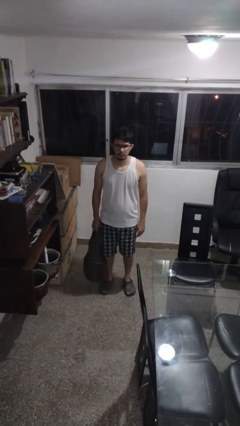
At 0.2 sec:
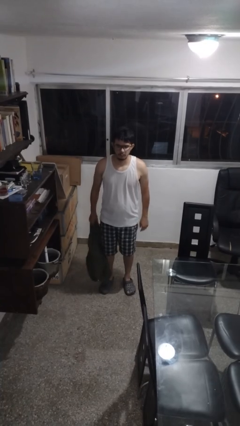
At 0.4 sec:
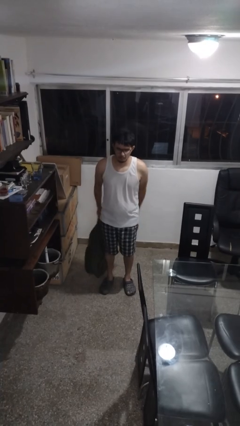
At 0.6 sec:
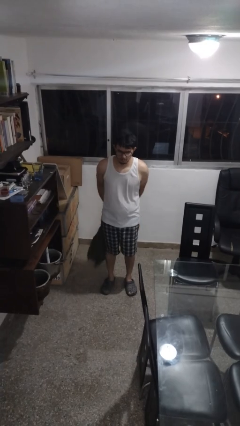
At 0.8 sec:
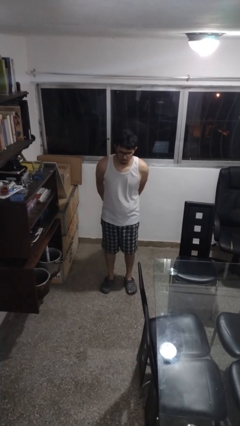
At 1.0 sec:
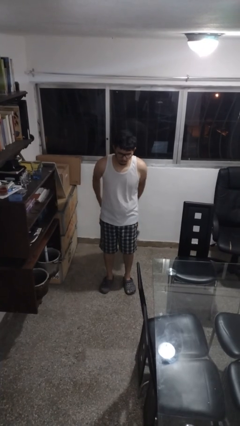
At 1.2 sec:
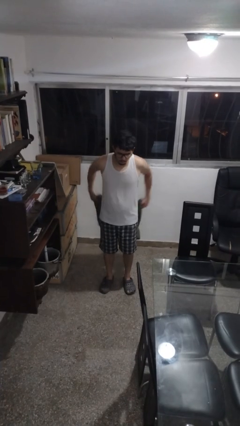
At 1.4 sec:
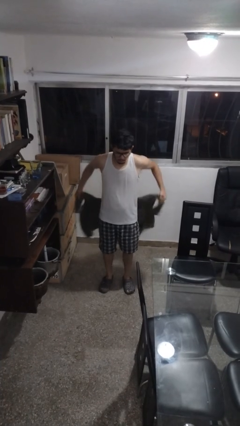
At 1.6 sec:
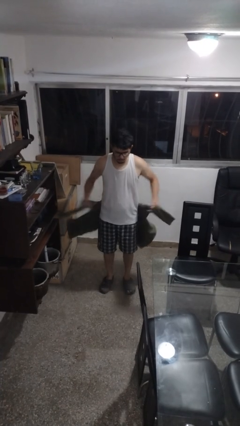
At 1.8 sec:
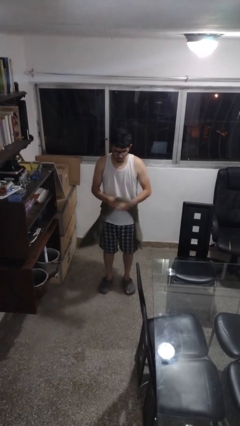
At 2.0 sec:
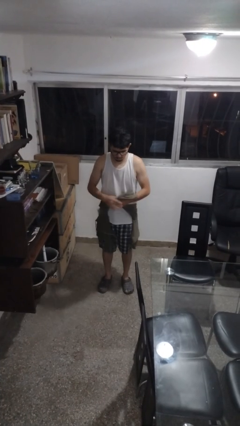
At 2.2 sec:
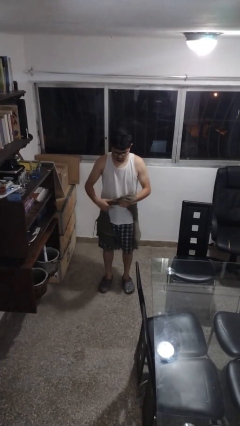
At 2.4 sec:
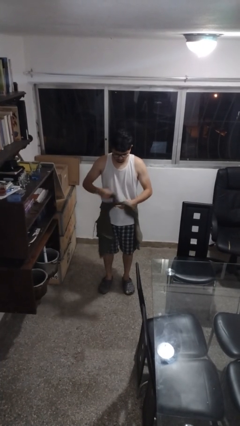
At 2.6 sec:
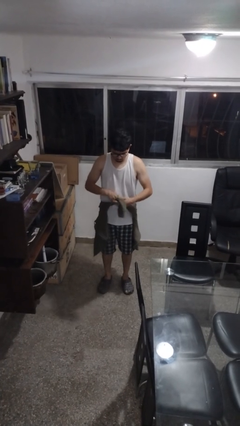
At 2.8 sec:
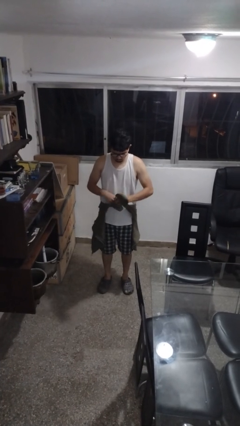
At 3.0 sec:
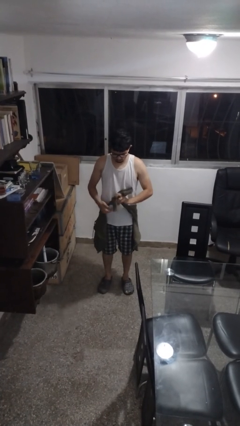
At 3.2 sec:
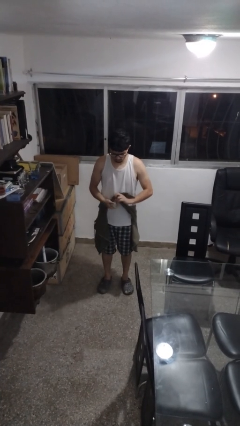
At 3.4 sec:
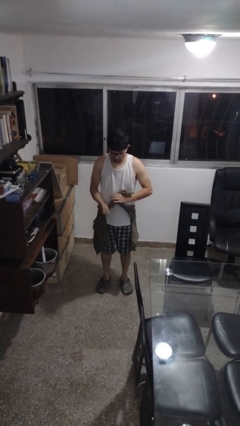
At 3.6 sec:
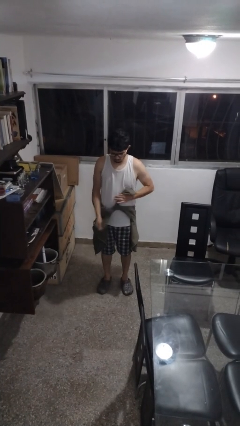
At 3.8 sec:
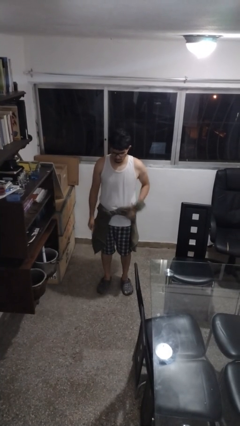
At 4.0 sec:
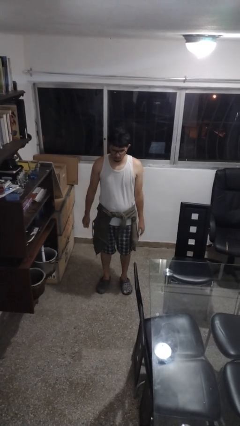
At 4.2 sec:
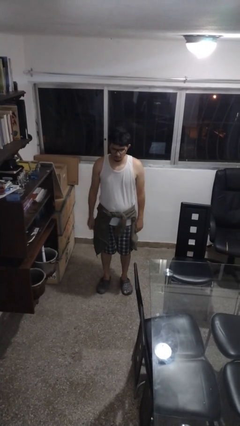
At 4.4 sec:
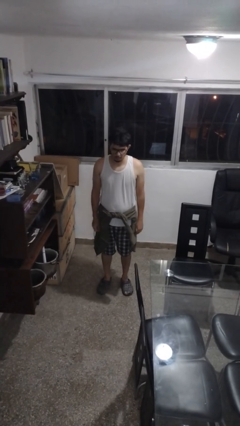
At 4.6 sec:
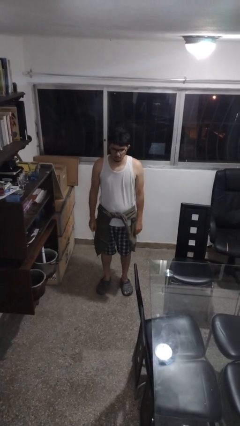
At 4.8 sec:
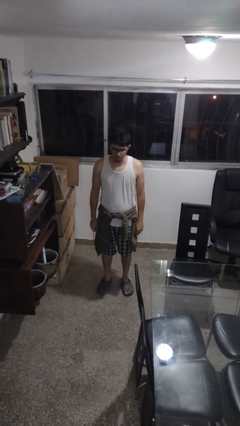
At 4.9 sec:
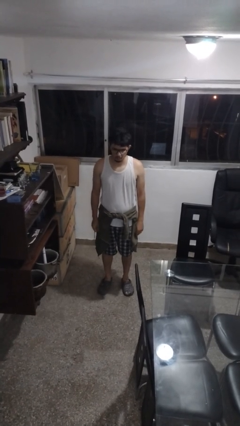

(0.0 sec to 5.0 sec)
person ties jacket around waist

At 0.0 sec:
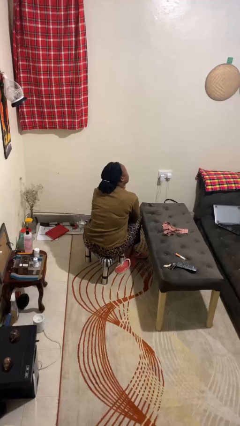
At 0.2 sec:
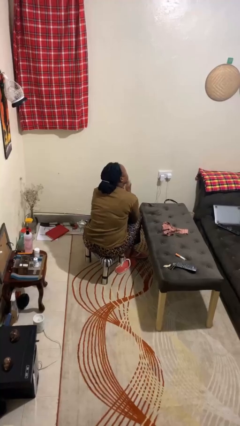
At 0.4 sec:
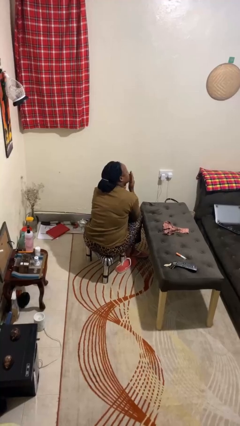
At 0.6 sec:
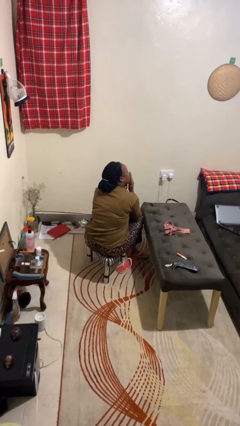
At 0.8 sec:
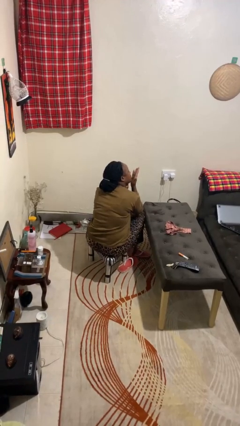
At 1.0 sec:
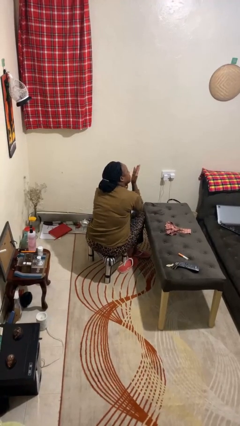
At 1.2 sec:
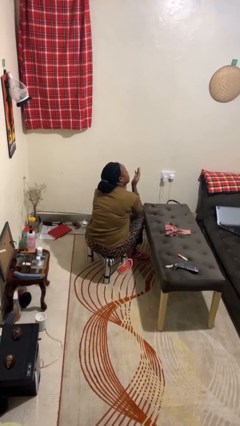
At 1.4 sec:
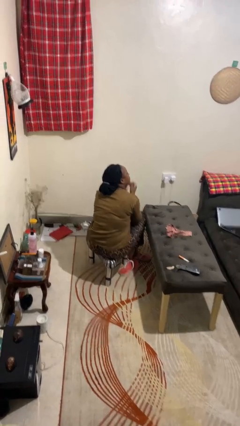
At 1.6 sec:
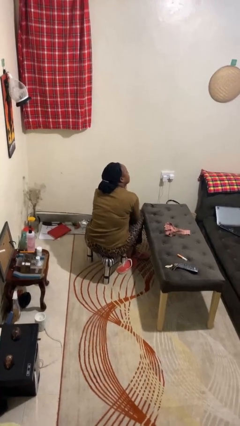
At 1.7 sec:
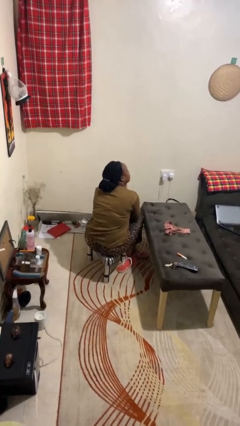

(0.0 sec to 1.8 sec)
person gestures blow kiss

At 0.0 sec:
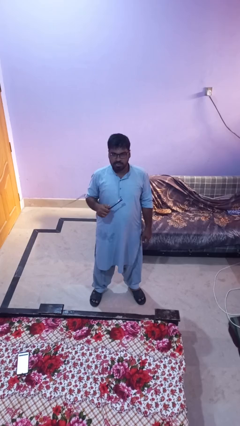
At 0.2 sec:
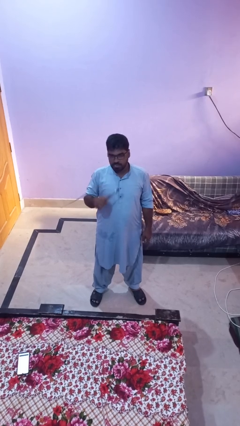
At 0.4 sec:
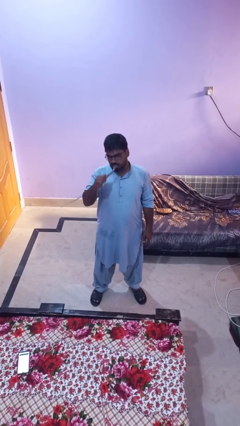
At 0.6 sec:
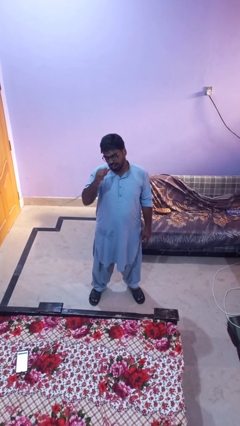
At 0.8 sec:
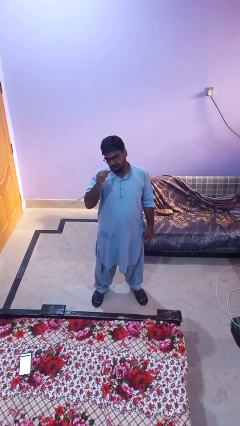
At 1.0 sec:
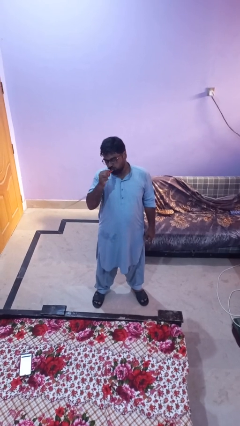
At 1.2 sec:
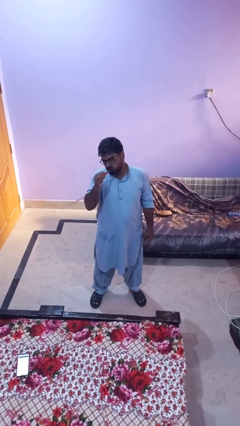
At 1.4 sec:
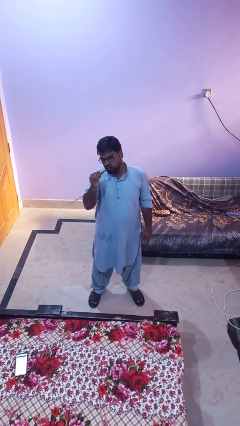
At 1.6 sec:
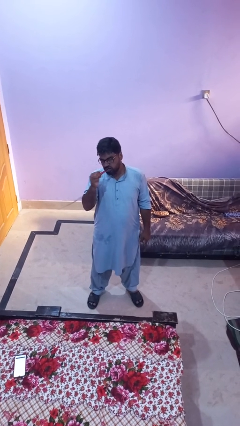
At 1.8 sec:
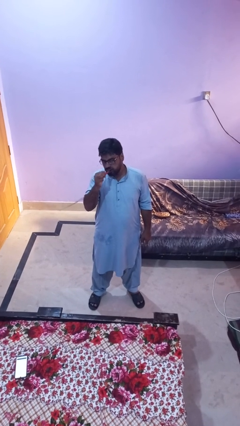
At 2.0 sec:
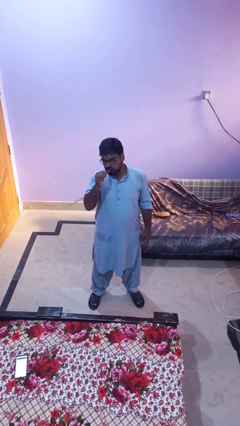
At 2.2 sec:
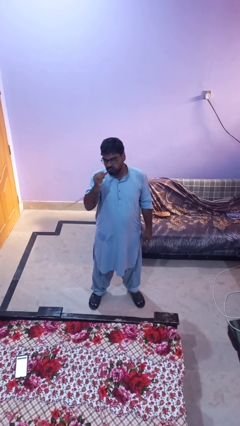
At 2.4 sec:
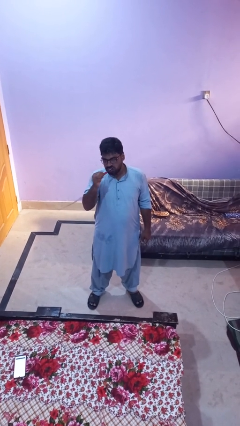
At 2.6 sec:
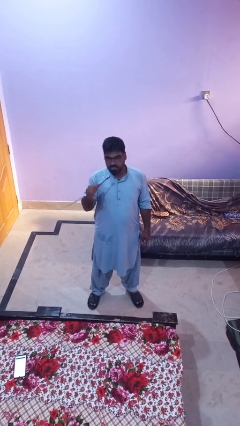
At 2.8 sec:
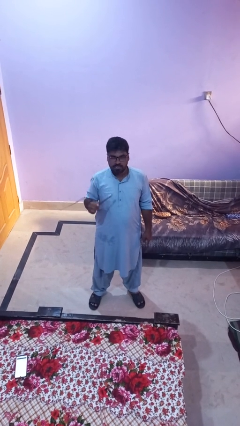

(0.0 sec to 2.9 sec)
person brushes teeth

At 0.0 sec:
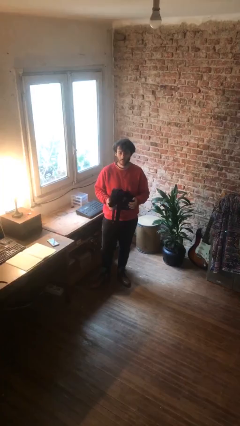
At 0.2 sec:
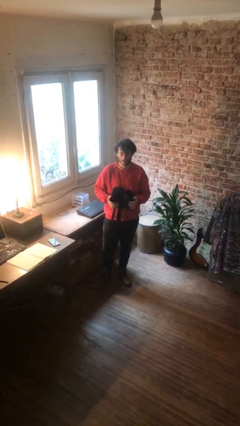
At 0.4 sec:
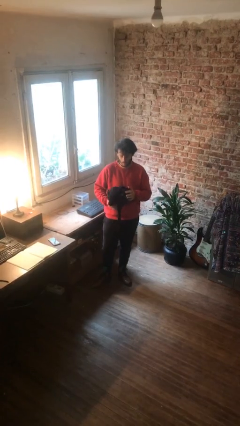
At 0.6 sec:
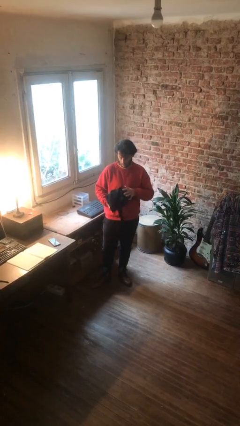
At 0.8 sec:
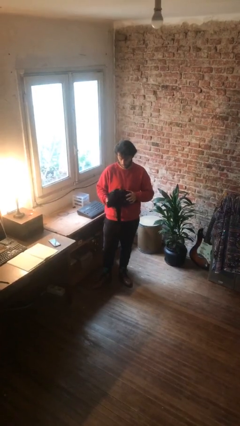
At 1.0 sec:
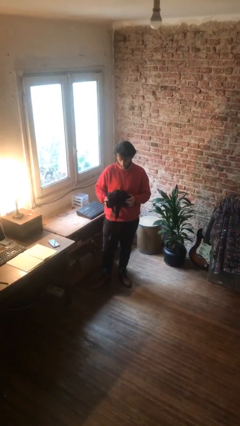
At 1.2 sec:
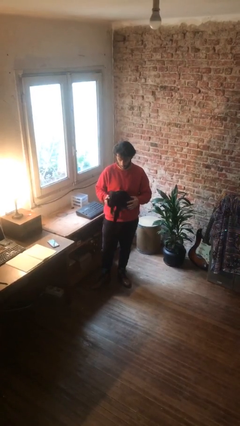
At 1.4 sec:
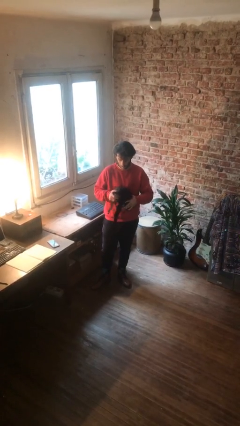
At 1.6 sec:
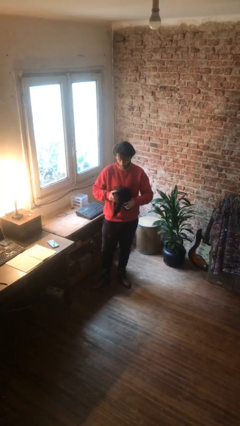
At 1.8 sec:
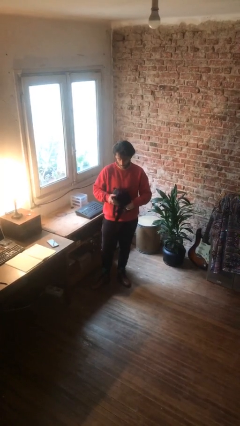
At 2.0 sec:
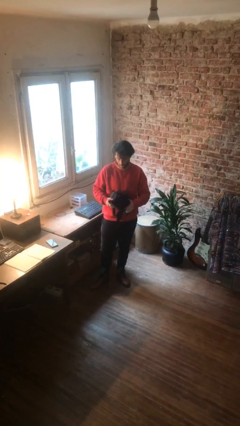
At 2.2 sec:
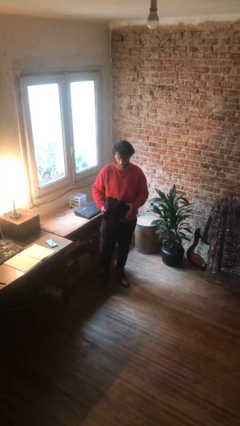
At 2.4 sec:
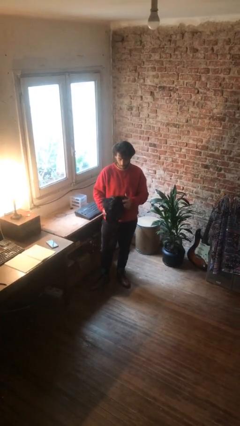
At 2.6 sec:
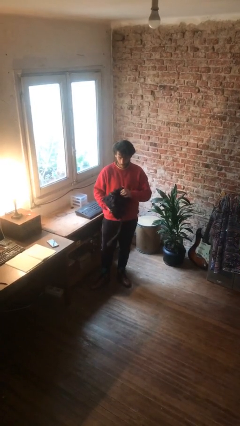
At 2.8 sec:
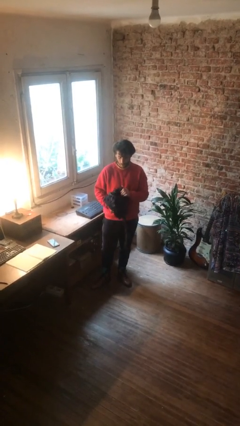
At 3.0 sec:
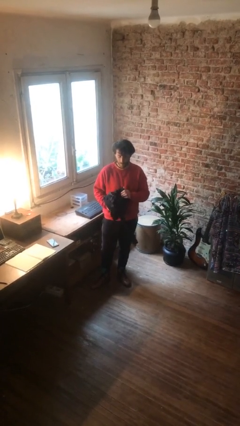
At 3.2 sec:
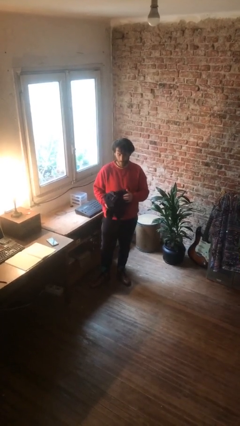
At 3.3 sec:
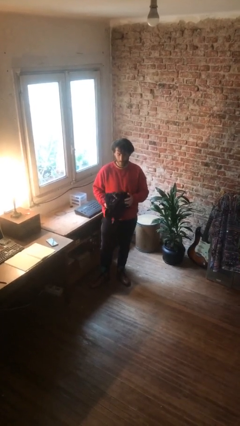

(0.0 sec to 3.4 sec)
person squeezes object

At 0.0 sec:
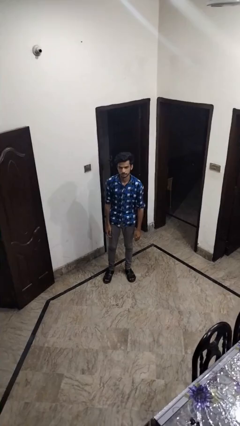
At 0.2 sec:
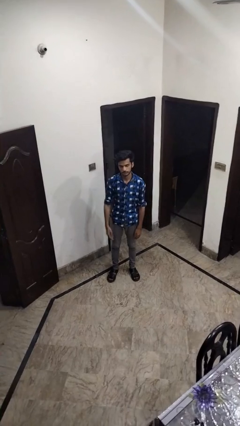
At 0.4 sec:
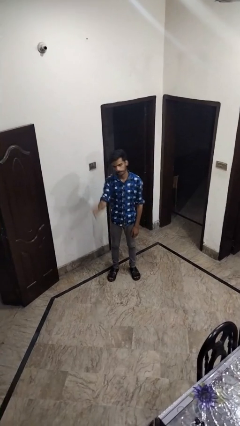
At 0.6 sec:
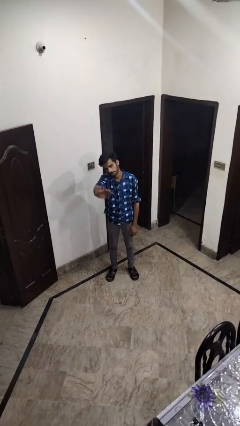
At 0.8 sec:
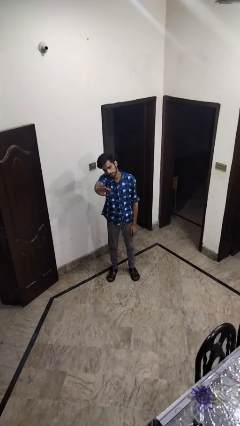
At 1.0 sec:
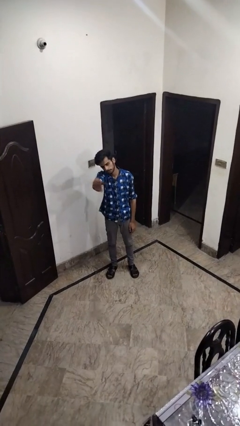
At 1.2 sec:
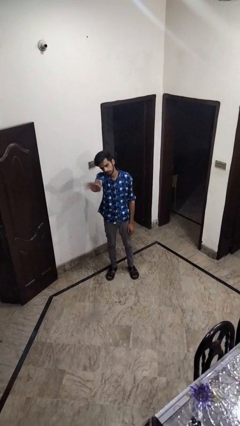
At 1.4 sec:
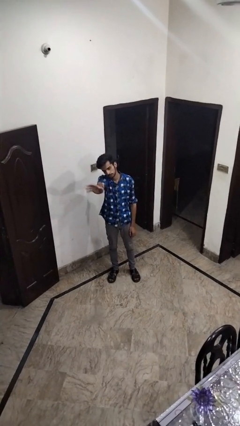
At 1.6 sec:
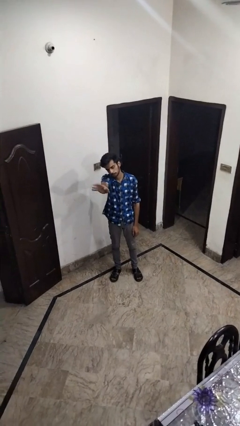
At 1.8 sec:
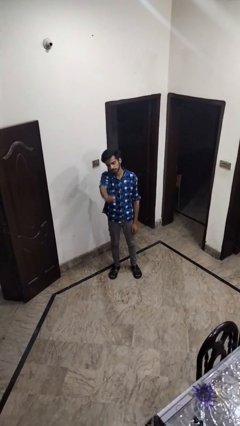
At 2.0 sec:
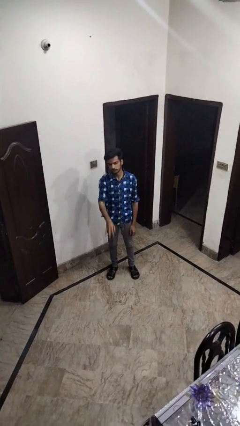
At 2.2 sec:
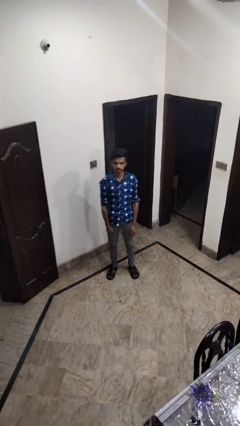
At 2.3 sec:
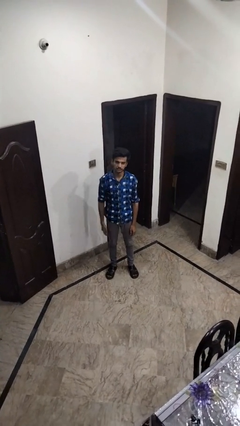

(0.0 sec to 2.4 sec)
person waves at person

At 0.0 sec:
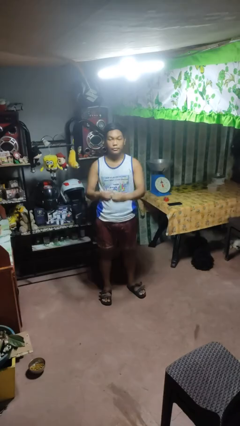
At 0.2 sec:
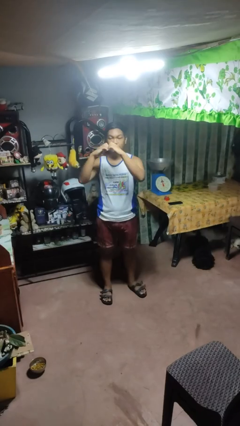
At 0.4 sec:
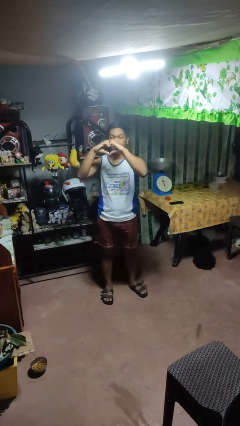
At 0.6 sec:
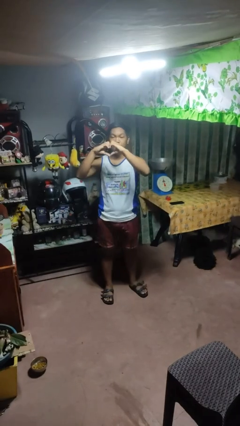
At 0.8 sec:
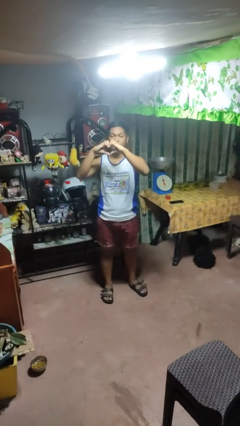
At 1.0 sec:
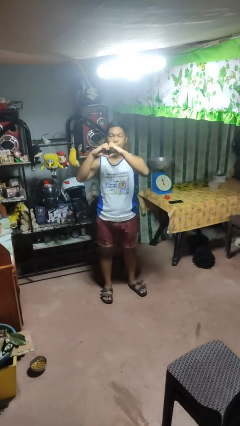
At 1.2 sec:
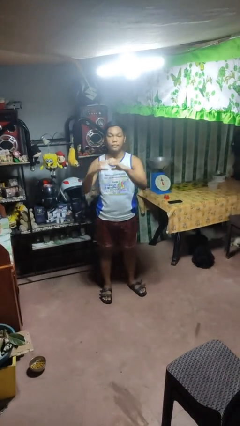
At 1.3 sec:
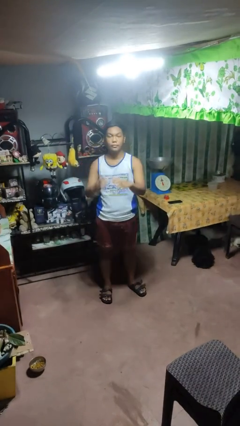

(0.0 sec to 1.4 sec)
person gestures heart

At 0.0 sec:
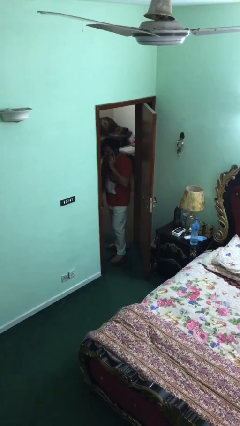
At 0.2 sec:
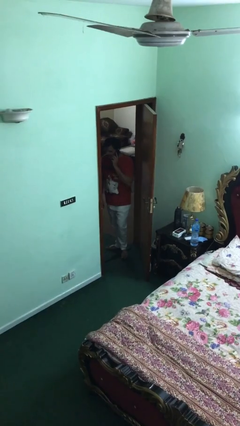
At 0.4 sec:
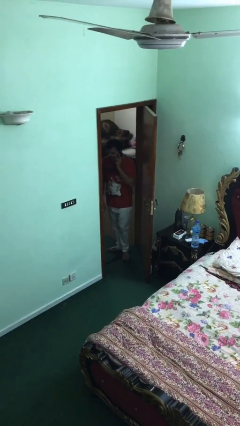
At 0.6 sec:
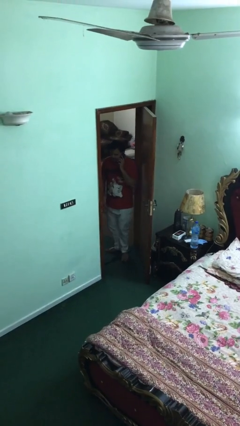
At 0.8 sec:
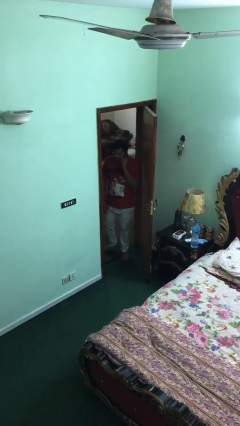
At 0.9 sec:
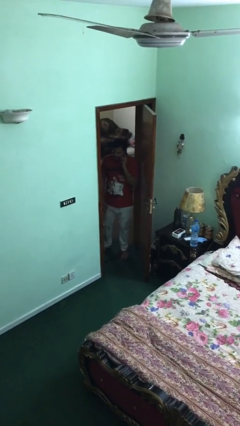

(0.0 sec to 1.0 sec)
person closes facility door
